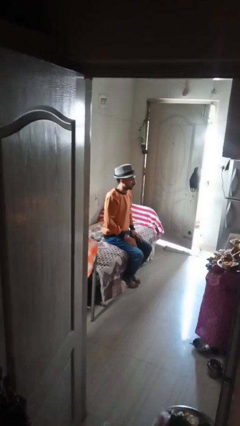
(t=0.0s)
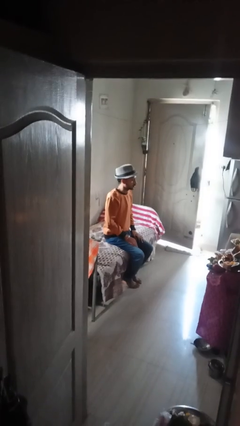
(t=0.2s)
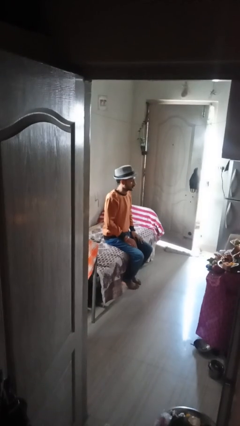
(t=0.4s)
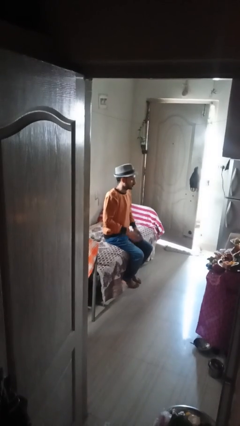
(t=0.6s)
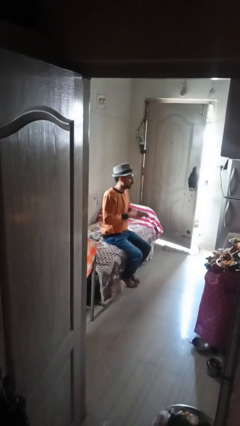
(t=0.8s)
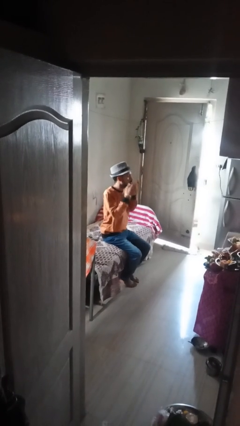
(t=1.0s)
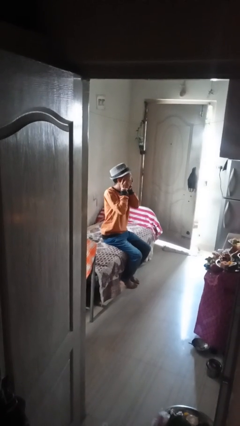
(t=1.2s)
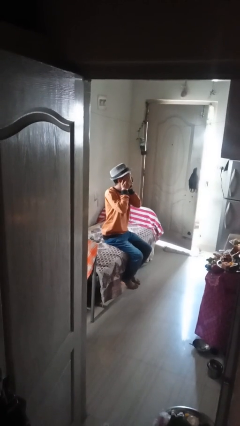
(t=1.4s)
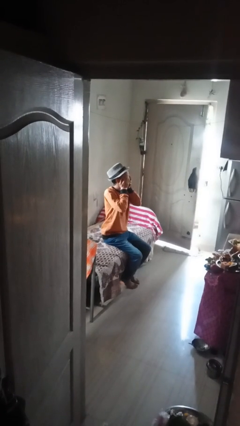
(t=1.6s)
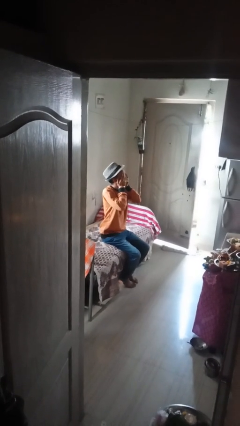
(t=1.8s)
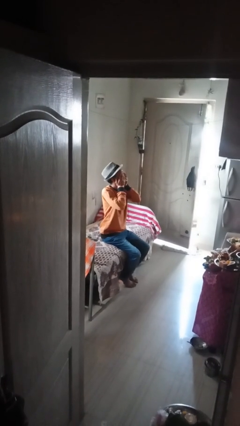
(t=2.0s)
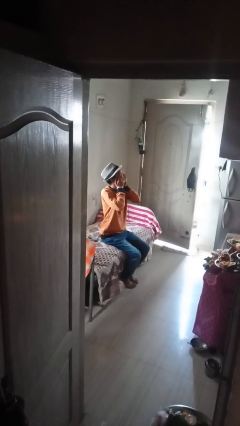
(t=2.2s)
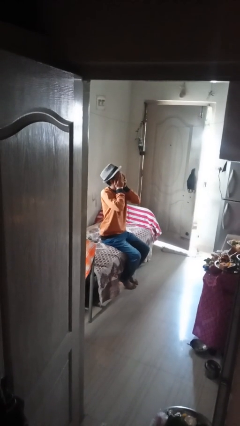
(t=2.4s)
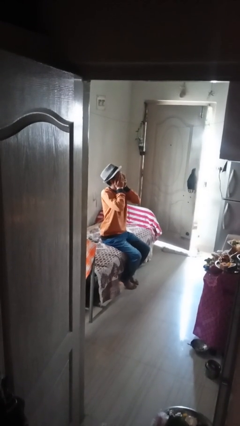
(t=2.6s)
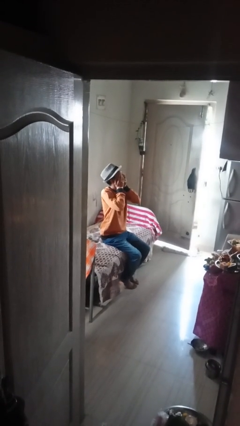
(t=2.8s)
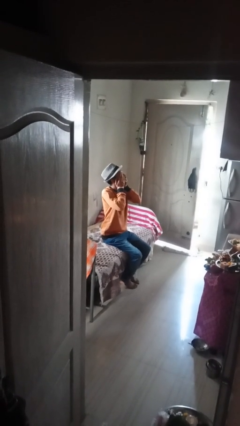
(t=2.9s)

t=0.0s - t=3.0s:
person covers face with hands

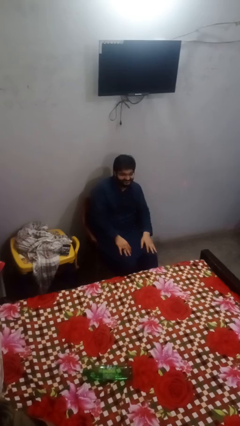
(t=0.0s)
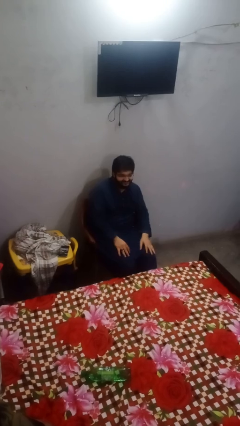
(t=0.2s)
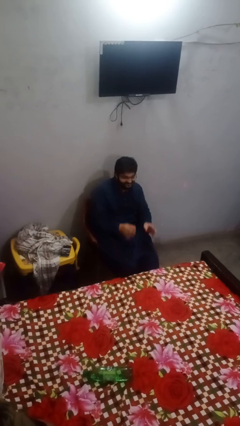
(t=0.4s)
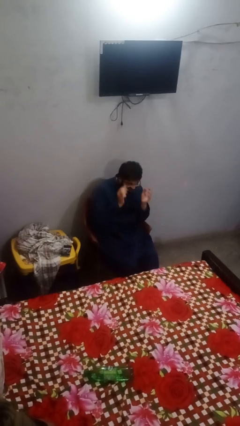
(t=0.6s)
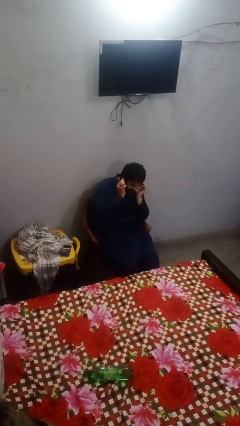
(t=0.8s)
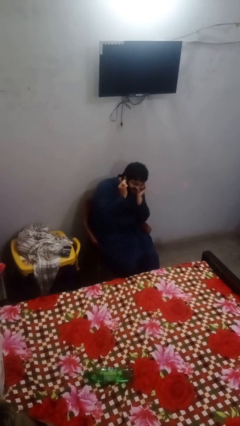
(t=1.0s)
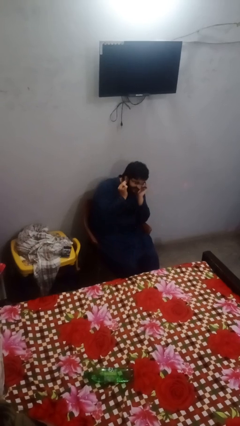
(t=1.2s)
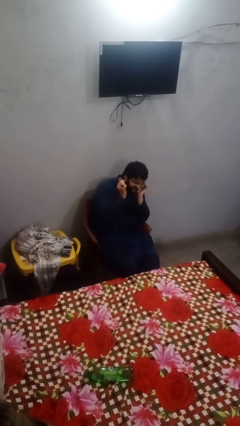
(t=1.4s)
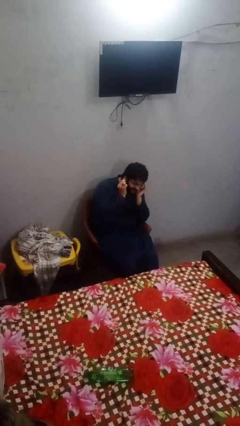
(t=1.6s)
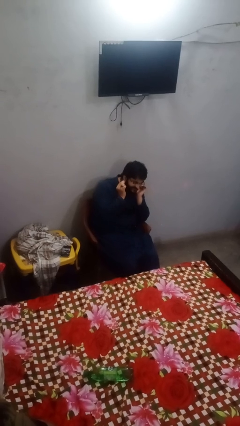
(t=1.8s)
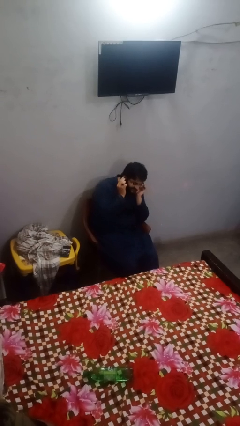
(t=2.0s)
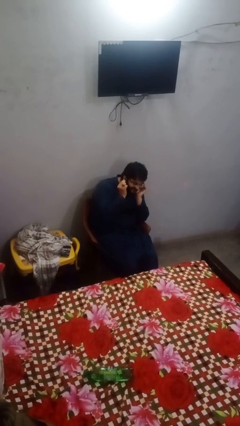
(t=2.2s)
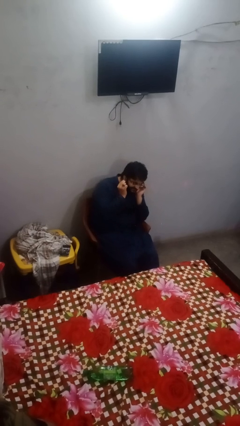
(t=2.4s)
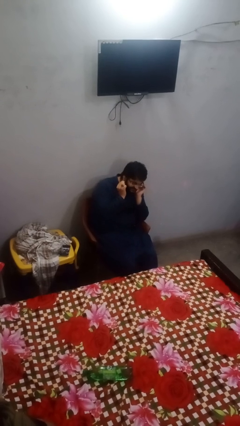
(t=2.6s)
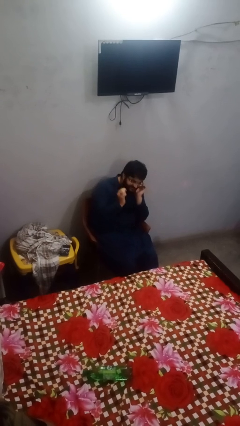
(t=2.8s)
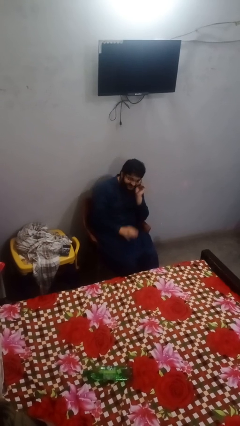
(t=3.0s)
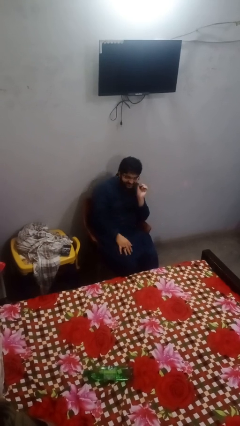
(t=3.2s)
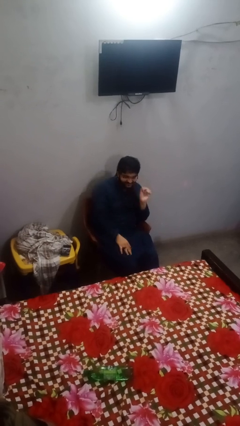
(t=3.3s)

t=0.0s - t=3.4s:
person touches earlobe

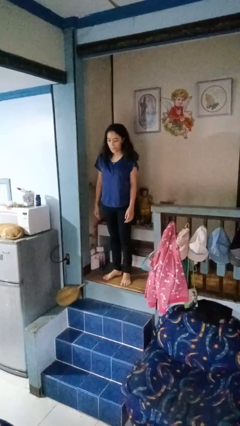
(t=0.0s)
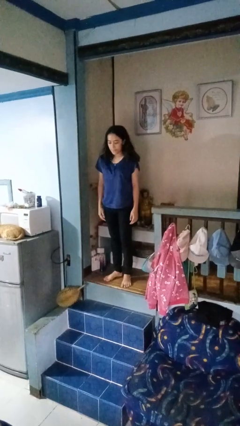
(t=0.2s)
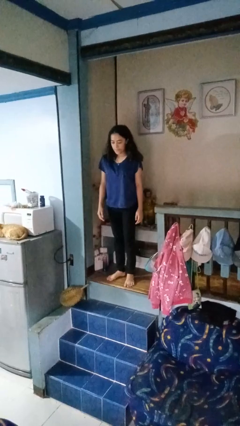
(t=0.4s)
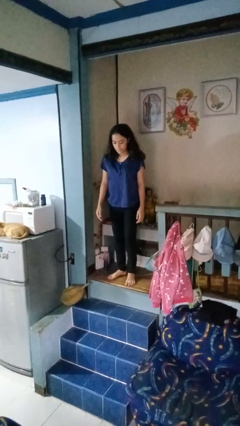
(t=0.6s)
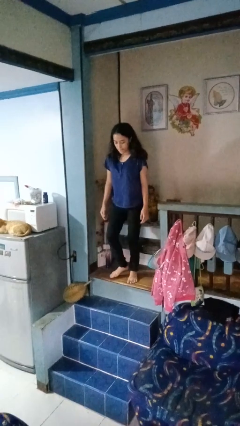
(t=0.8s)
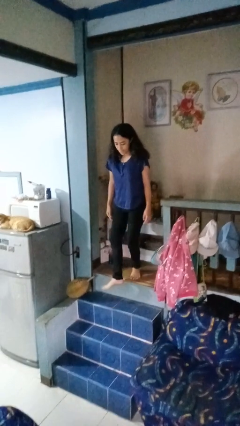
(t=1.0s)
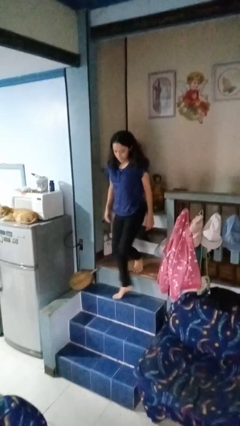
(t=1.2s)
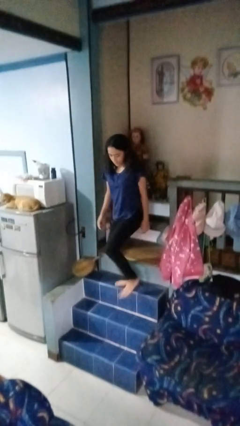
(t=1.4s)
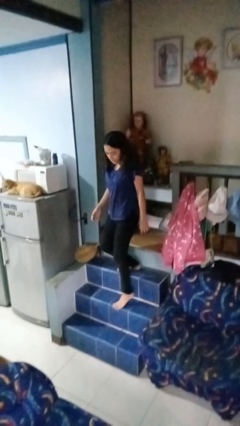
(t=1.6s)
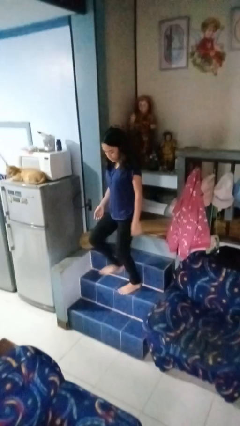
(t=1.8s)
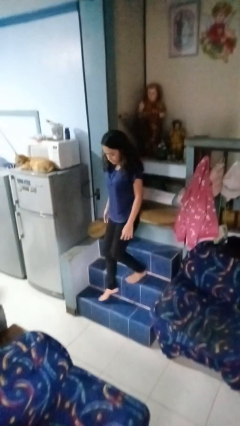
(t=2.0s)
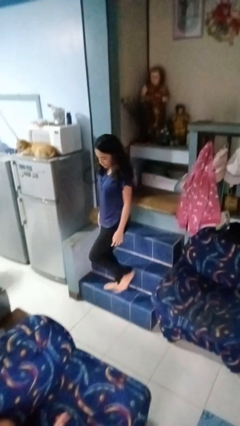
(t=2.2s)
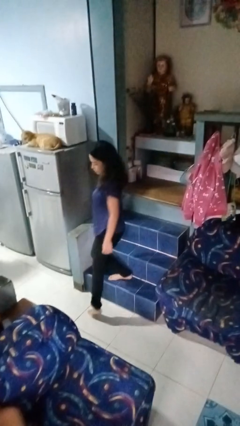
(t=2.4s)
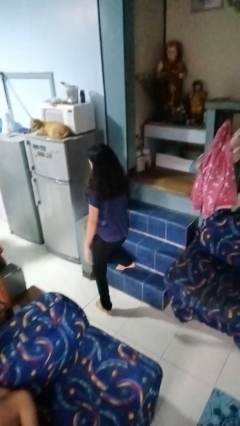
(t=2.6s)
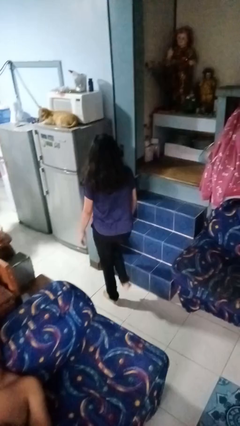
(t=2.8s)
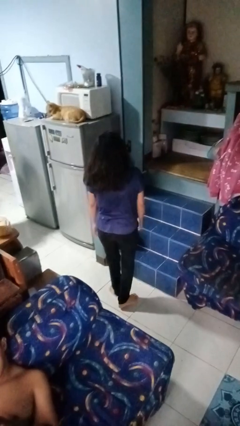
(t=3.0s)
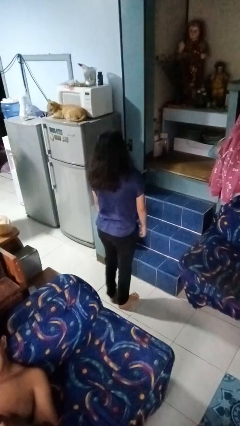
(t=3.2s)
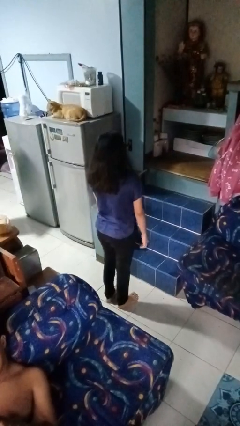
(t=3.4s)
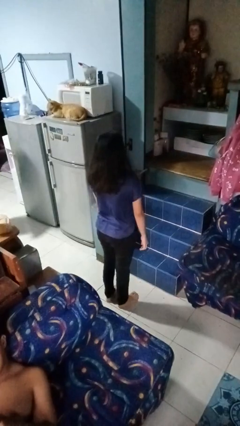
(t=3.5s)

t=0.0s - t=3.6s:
person climbs down stairs

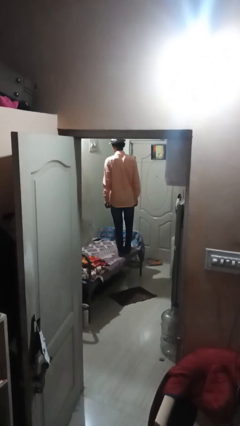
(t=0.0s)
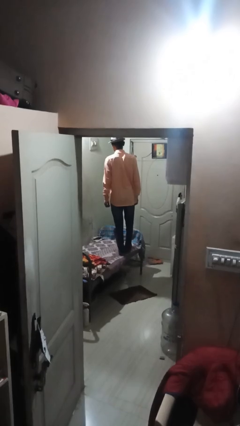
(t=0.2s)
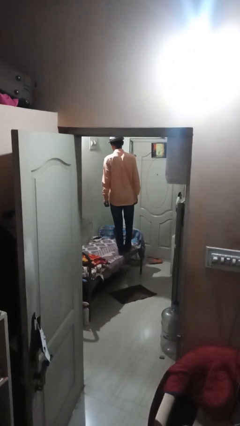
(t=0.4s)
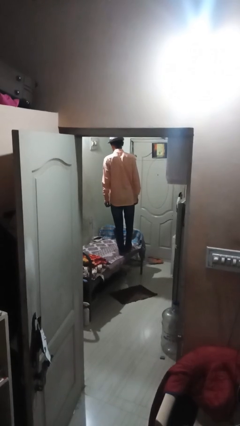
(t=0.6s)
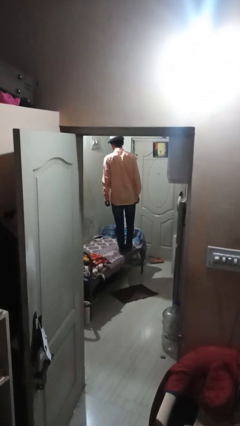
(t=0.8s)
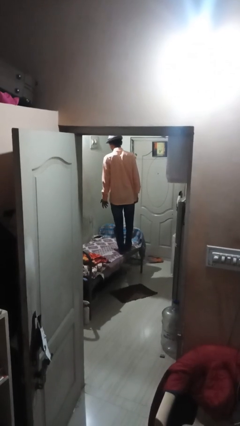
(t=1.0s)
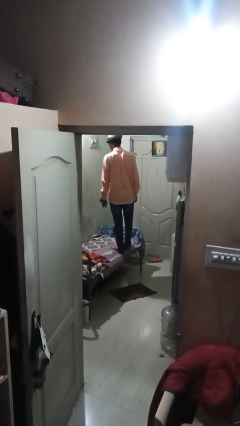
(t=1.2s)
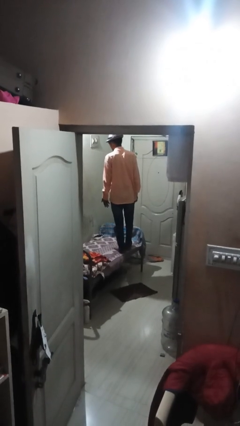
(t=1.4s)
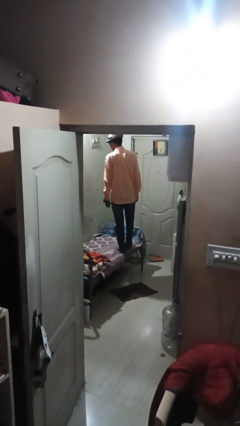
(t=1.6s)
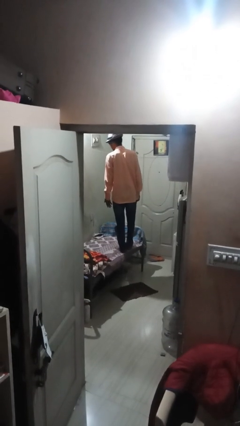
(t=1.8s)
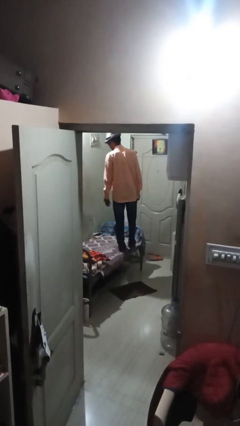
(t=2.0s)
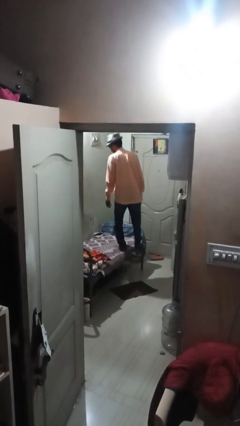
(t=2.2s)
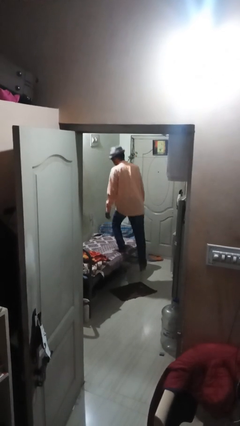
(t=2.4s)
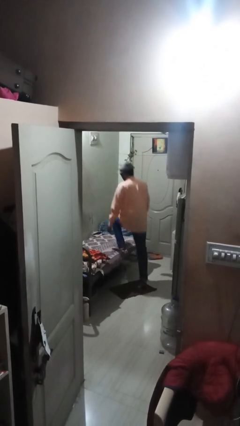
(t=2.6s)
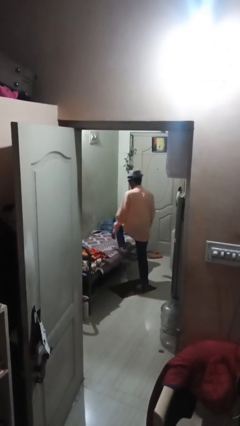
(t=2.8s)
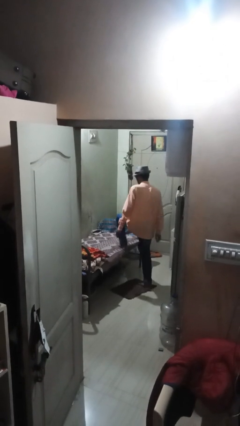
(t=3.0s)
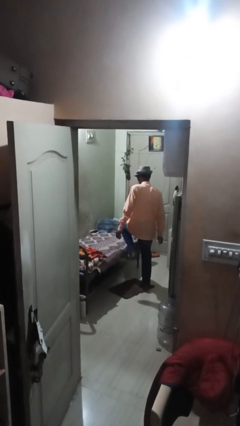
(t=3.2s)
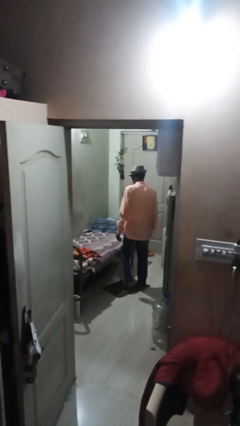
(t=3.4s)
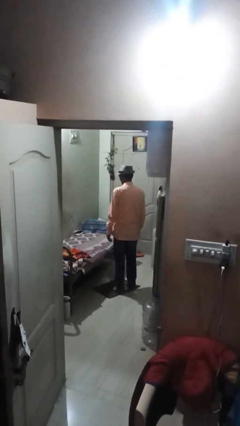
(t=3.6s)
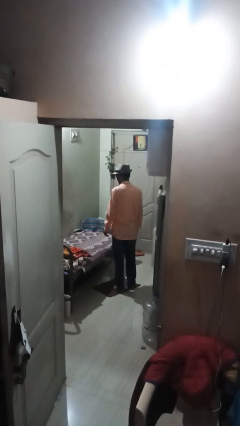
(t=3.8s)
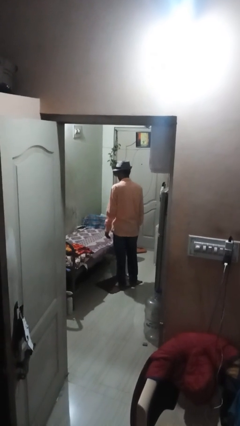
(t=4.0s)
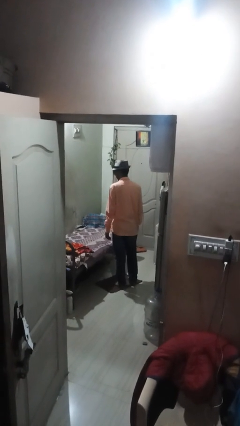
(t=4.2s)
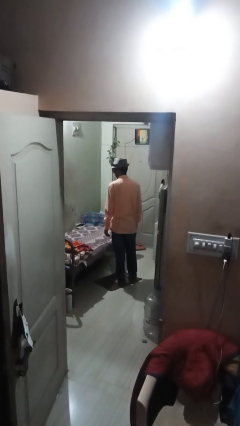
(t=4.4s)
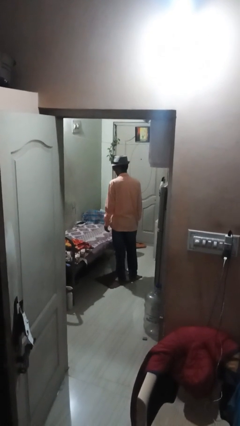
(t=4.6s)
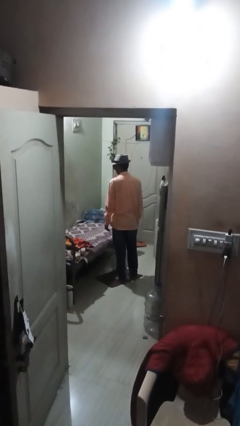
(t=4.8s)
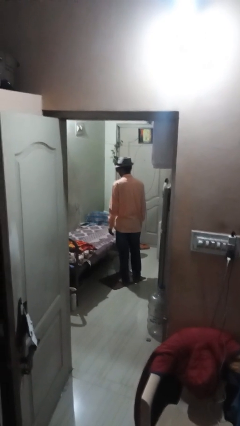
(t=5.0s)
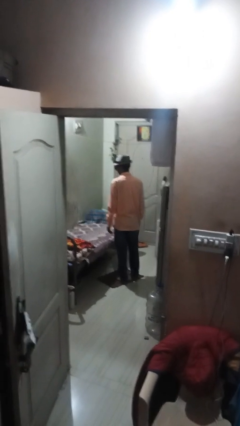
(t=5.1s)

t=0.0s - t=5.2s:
person climbs off couch

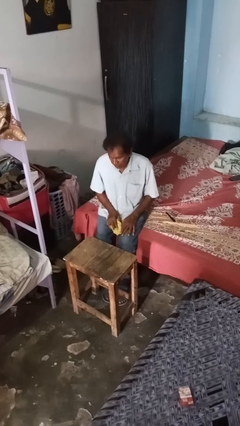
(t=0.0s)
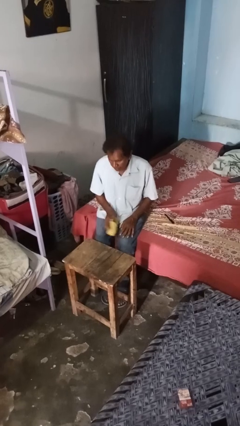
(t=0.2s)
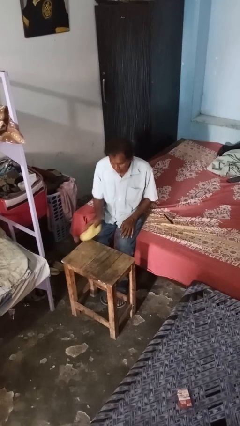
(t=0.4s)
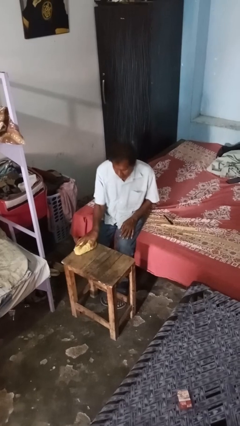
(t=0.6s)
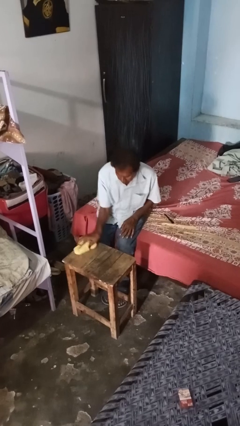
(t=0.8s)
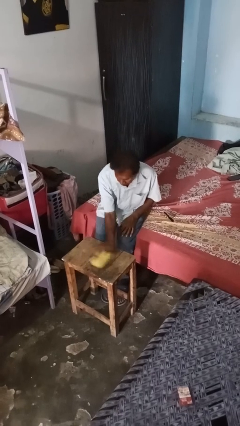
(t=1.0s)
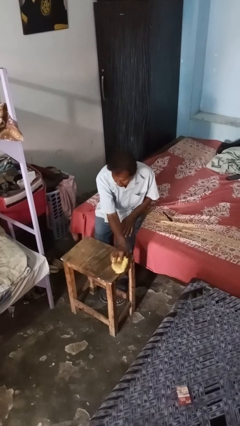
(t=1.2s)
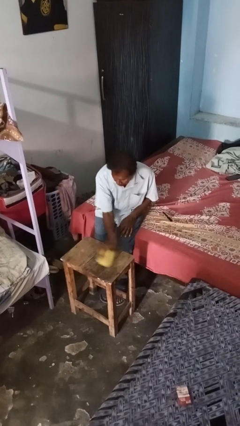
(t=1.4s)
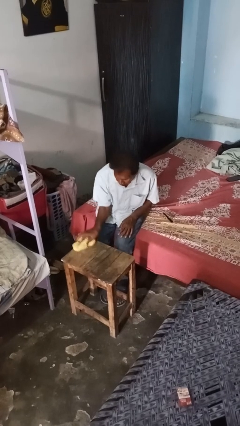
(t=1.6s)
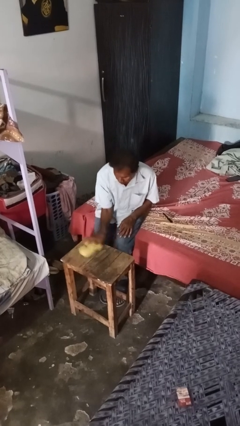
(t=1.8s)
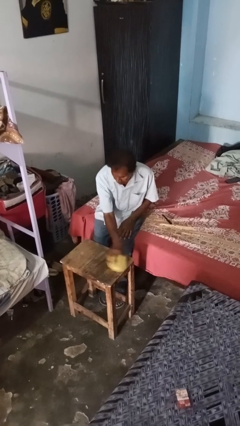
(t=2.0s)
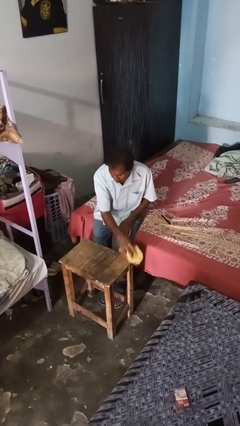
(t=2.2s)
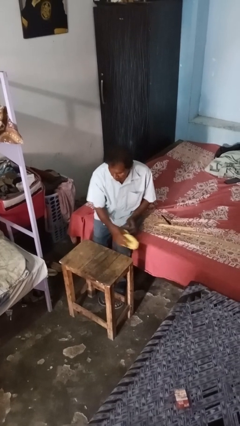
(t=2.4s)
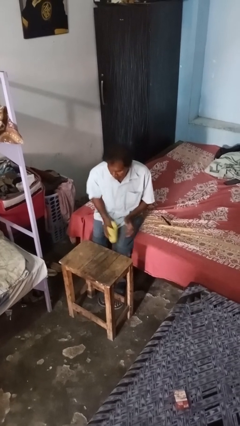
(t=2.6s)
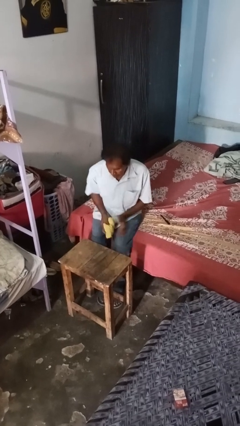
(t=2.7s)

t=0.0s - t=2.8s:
person cleans table with rag
